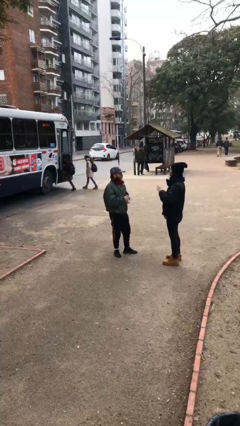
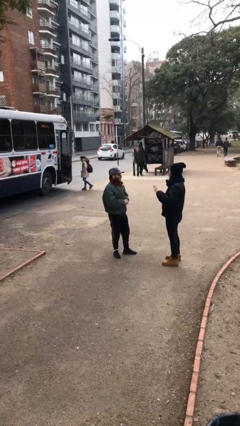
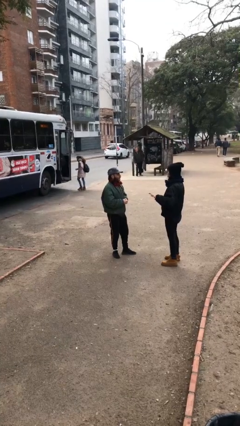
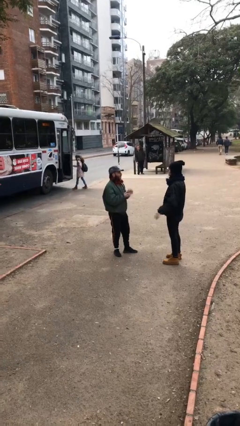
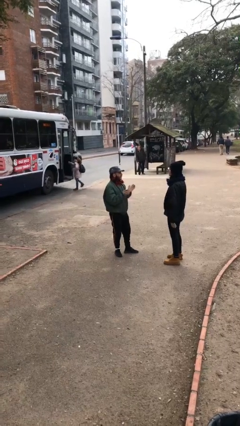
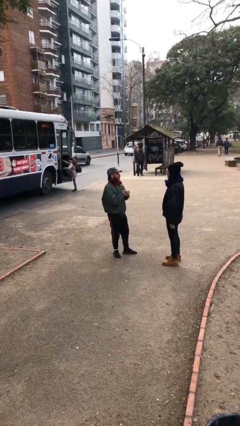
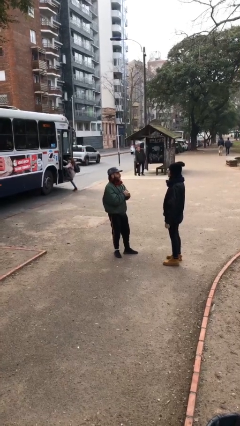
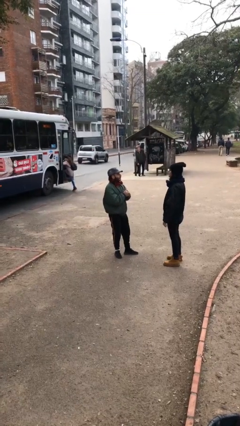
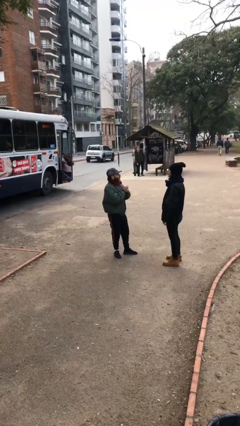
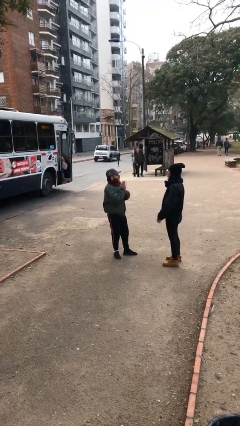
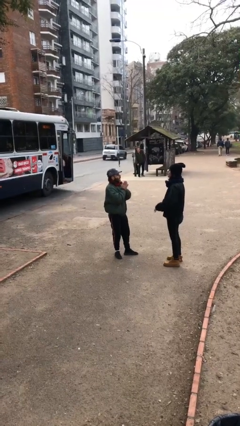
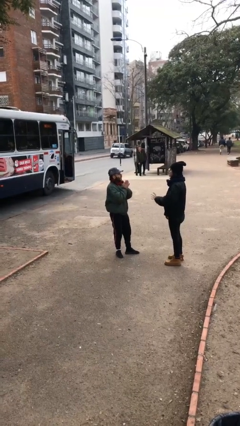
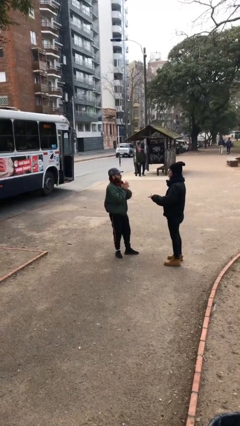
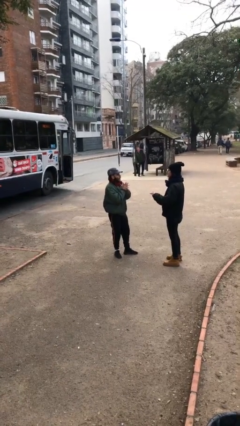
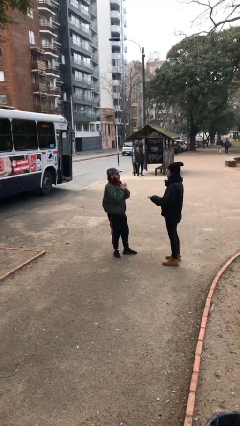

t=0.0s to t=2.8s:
person talks to person

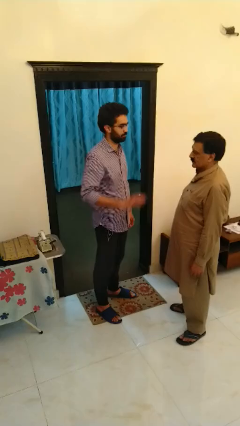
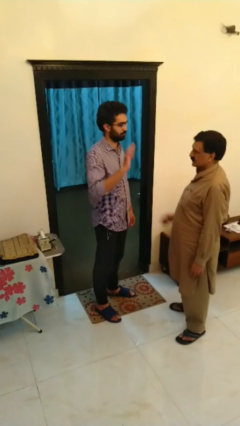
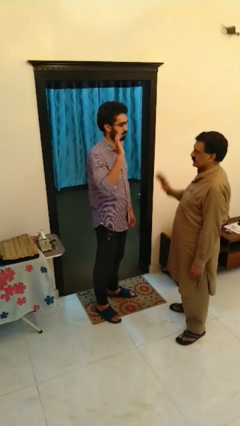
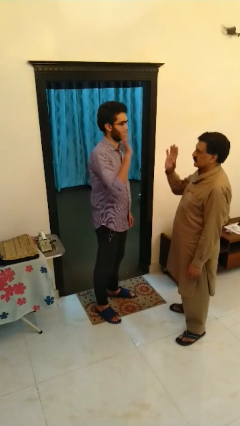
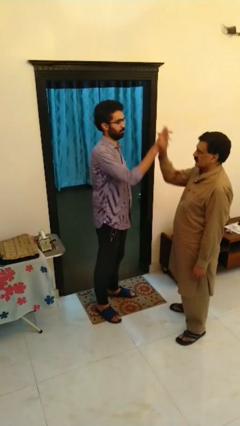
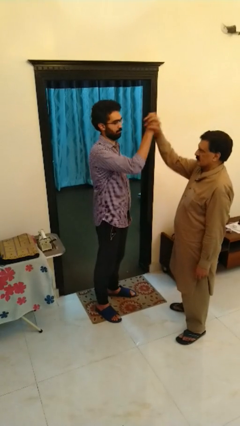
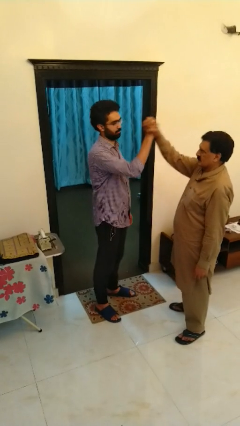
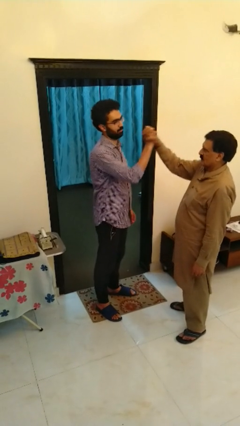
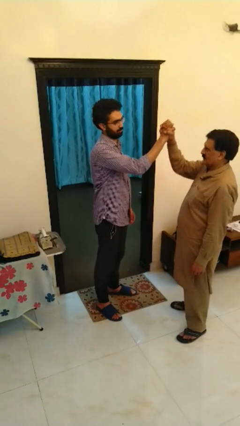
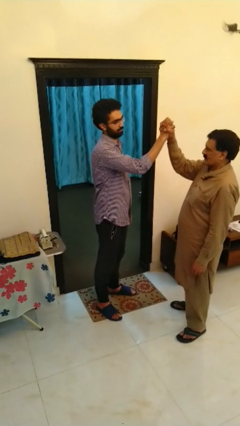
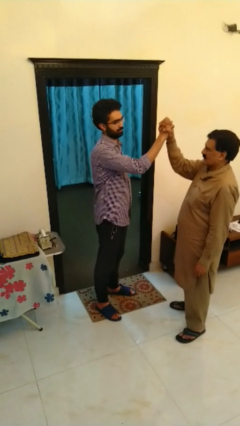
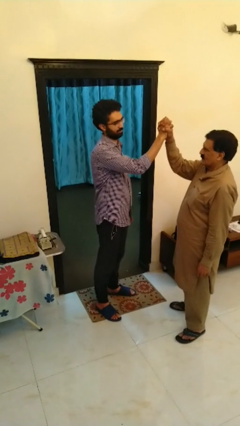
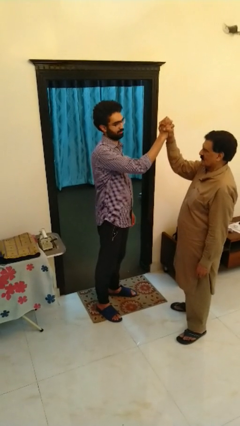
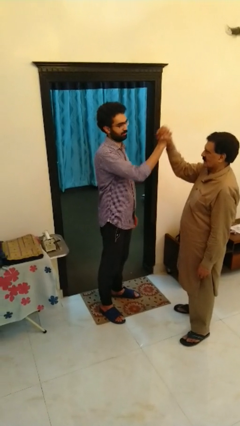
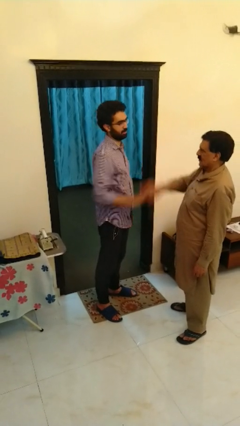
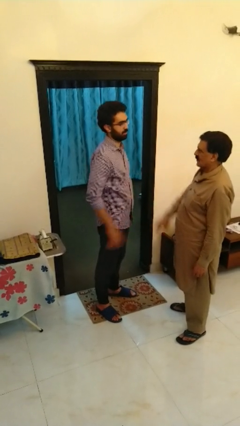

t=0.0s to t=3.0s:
person highfives hand

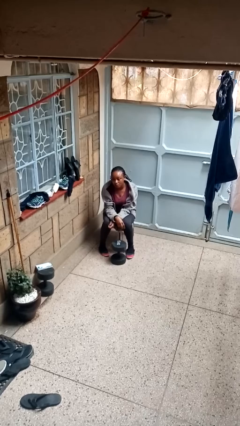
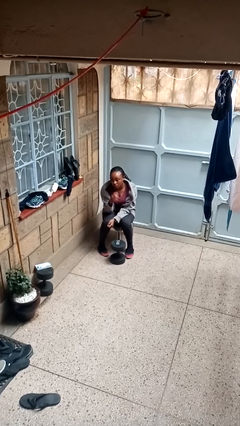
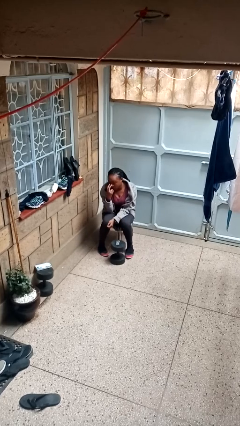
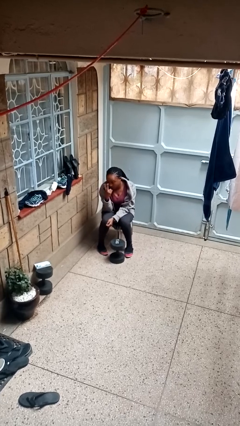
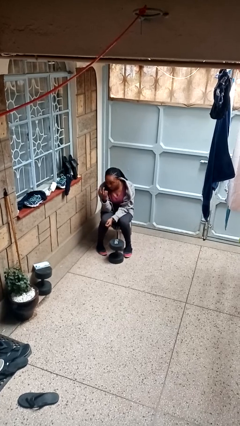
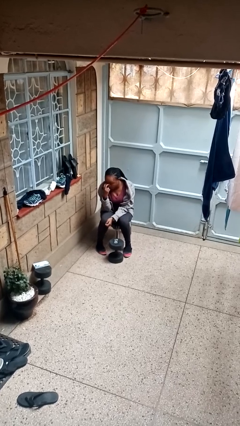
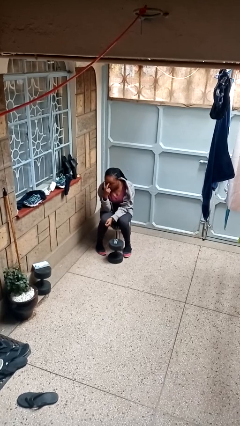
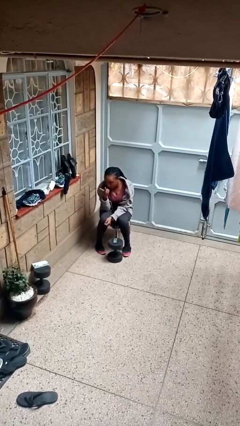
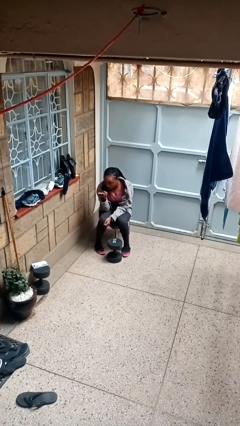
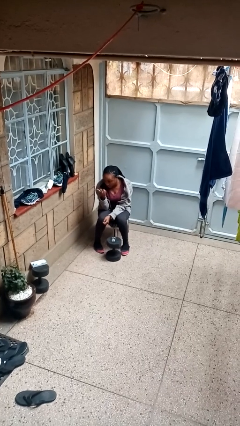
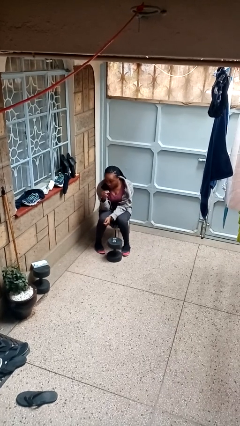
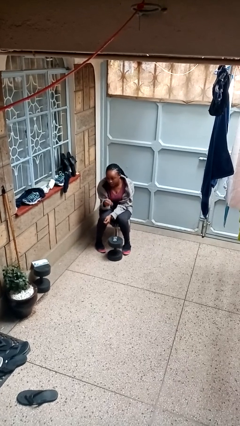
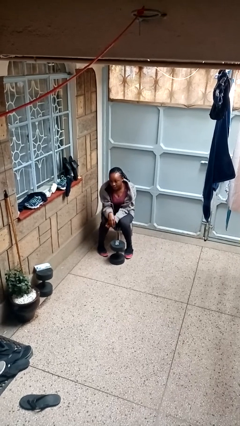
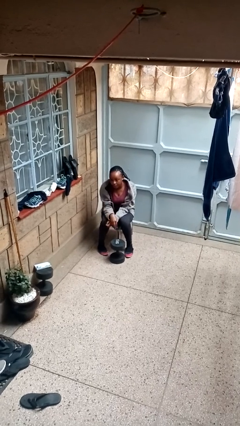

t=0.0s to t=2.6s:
person gestures watch closely

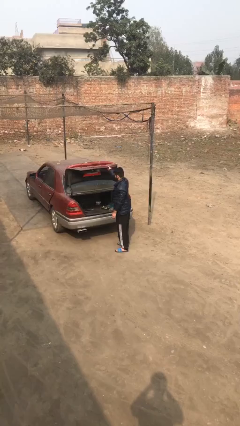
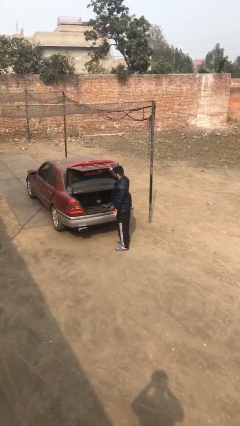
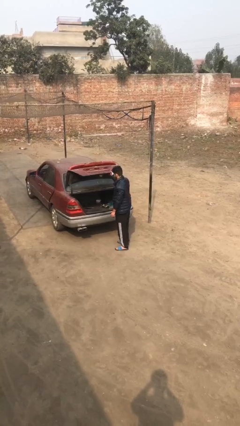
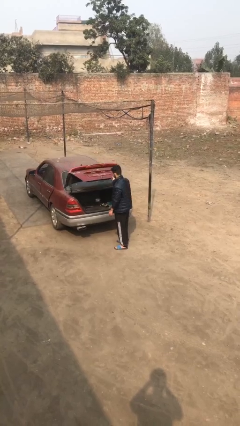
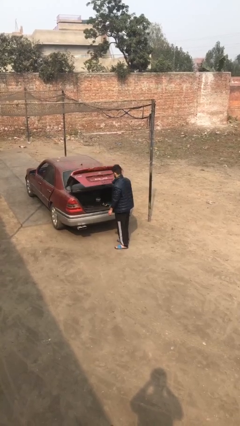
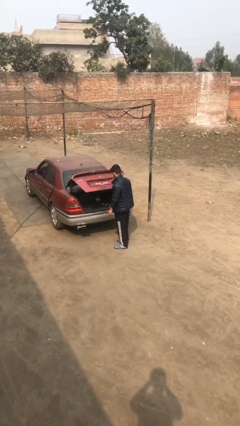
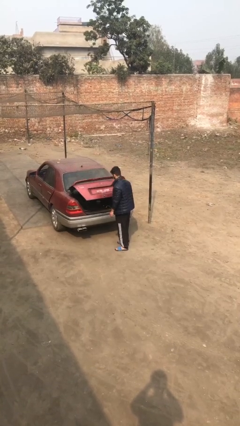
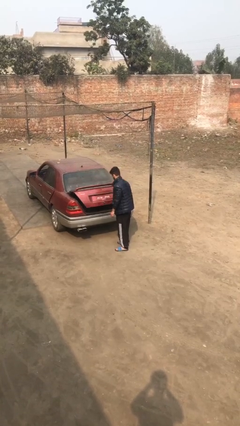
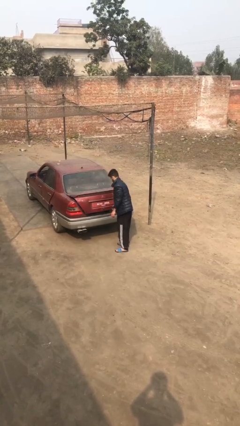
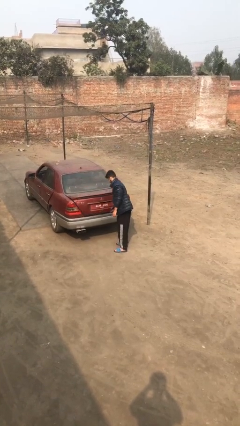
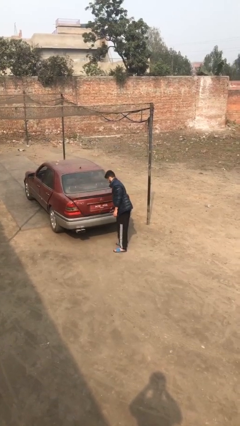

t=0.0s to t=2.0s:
person closes car trunk

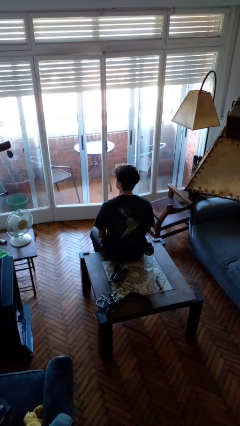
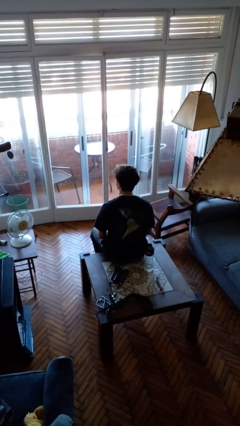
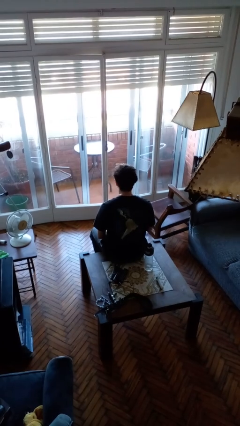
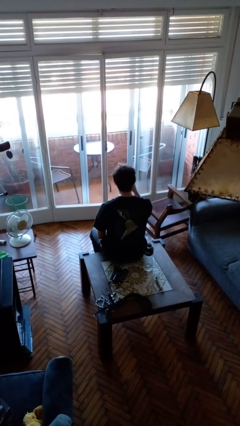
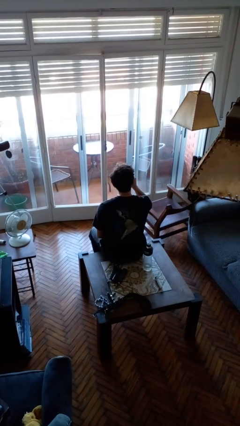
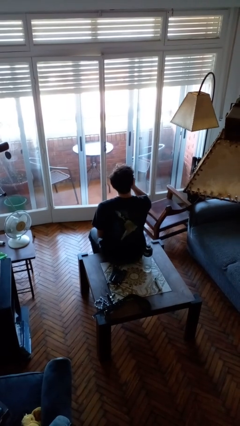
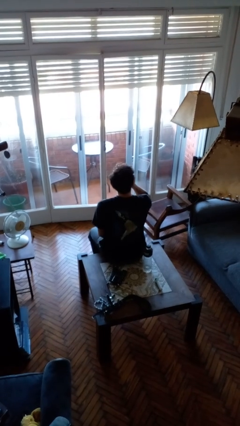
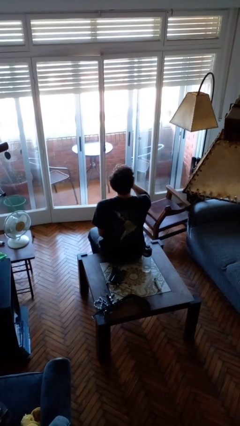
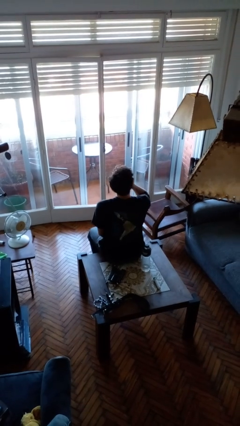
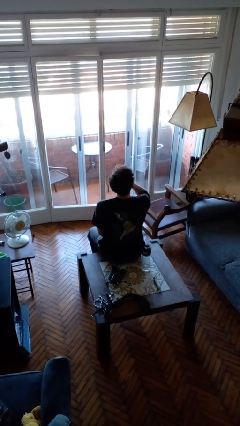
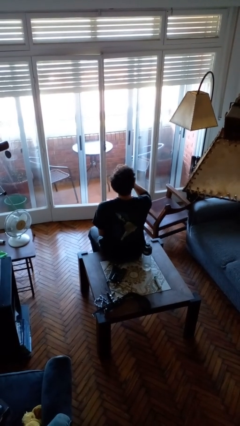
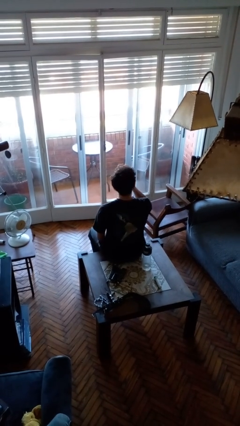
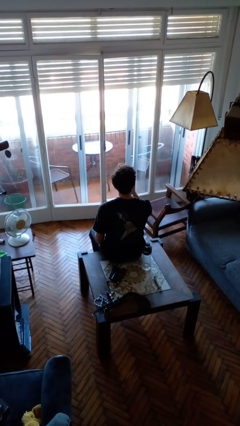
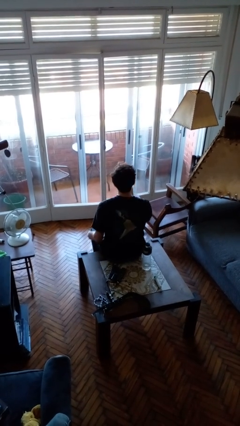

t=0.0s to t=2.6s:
person yawns

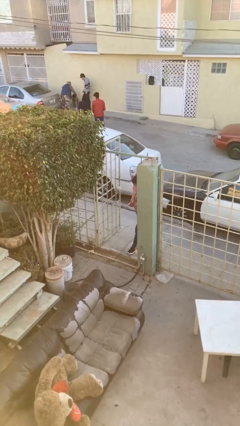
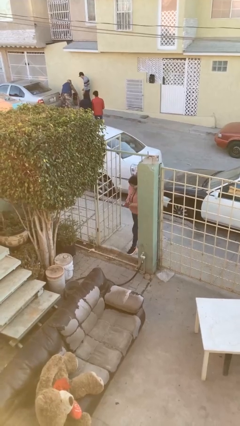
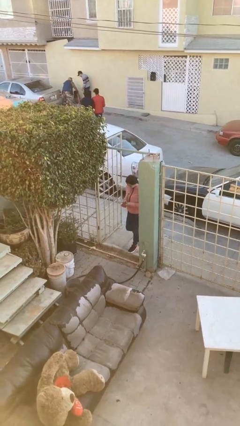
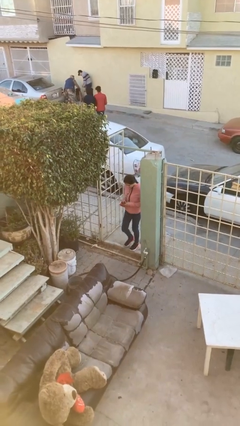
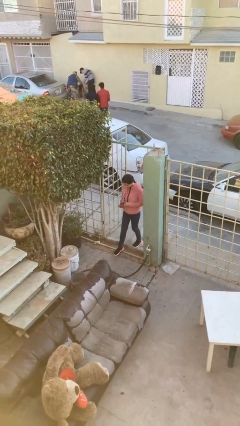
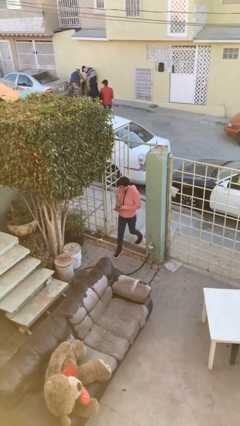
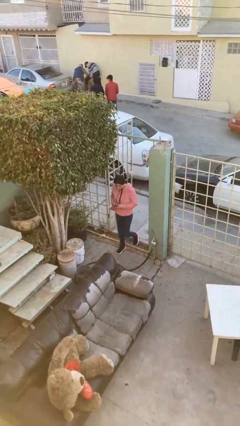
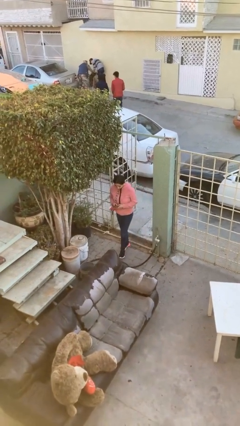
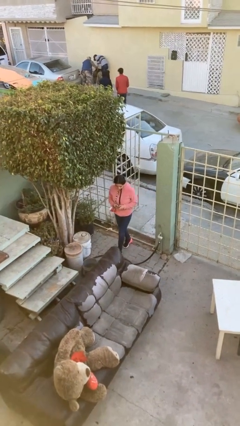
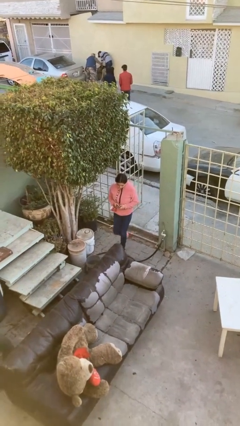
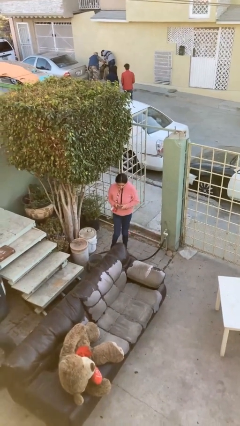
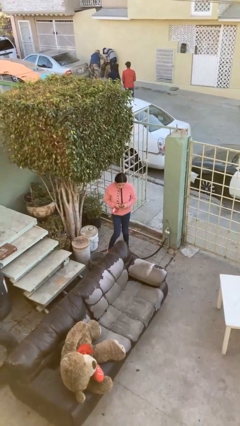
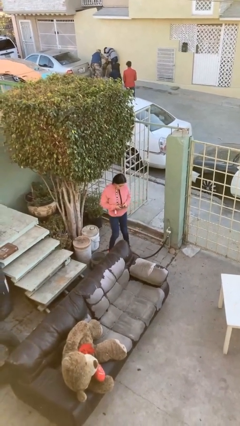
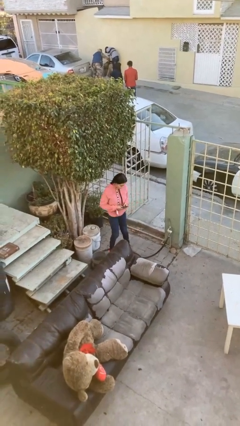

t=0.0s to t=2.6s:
person enters scene through structure

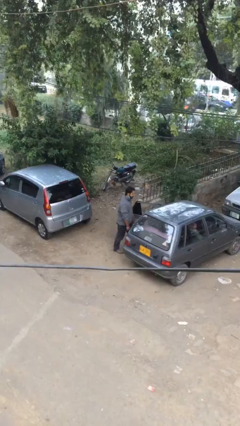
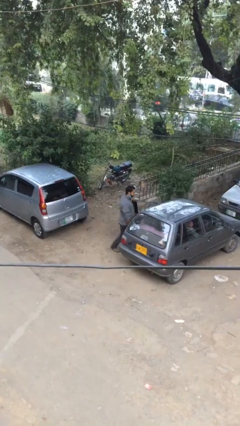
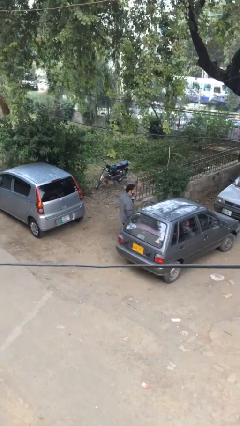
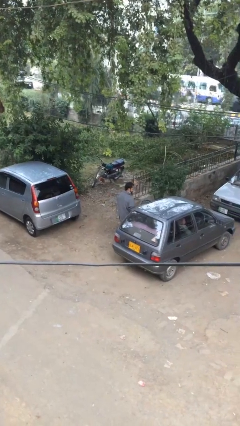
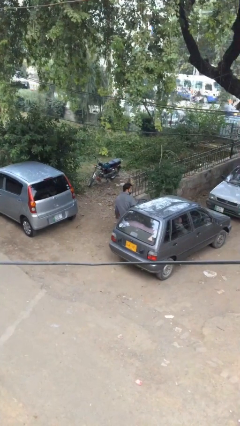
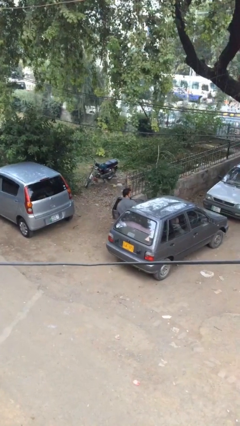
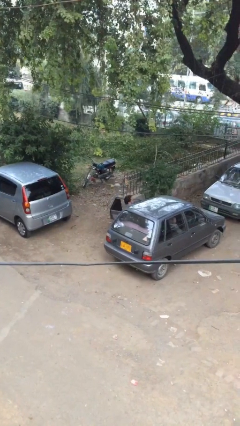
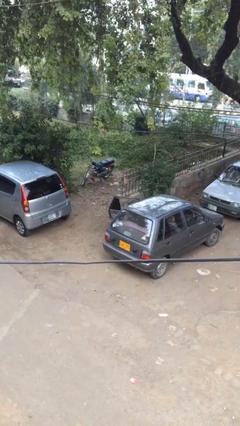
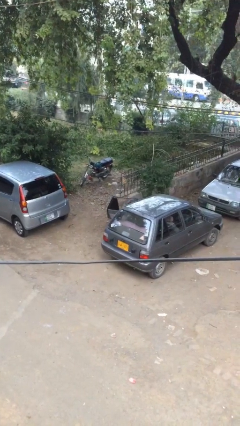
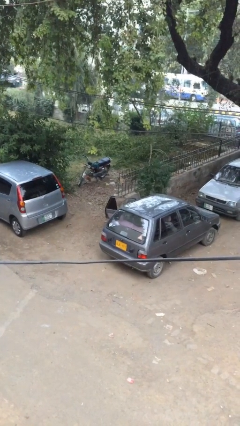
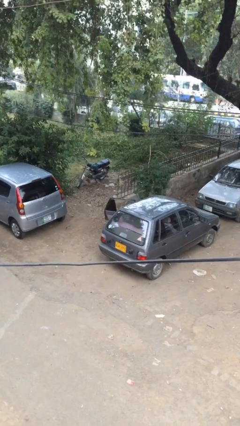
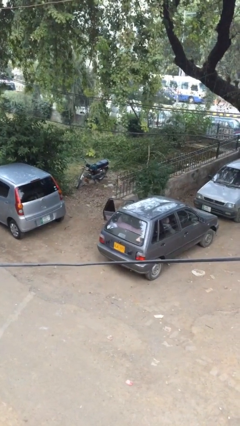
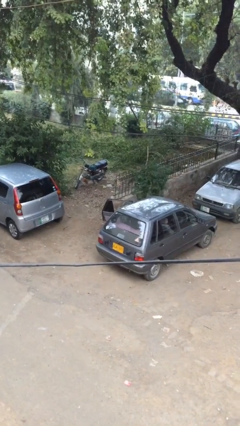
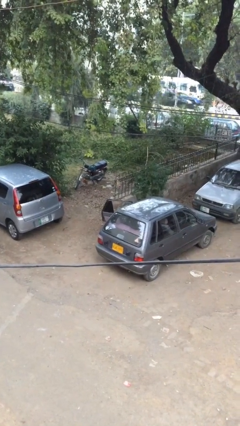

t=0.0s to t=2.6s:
person enters car
